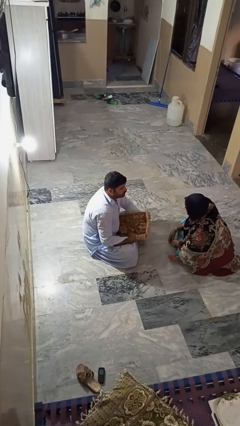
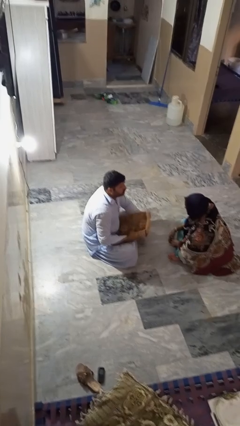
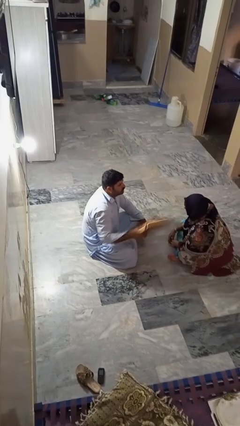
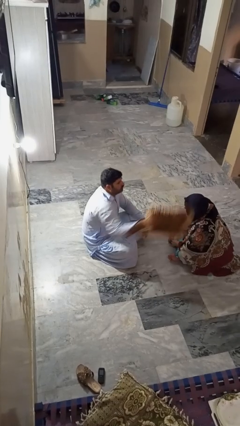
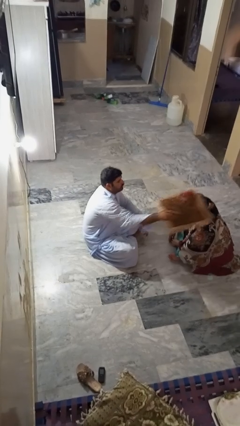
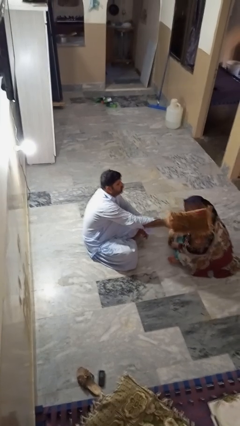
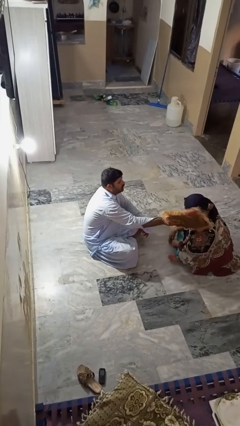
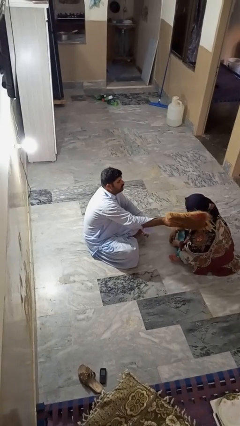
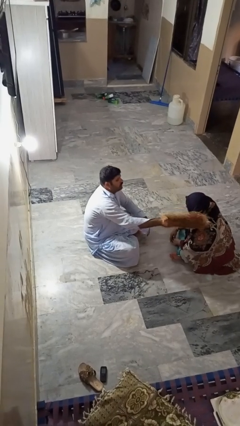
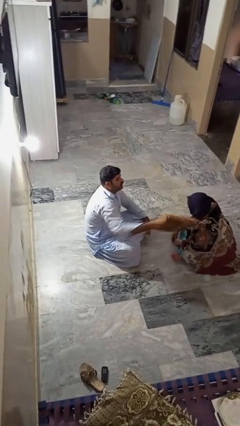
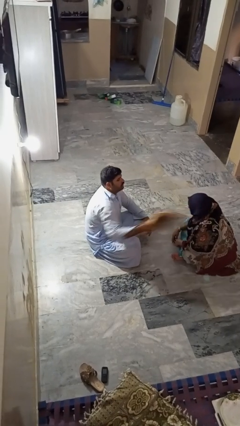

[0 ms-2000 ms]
person hits person with pillow

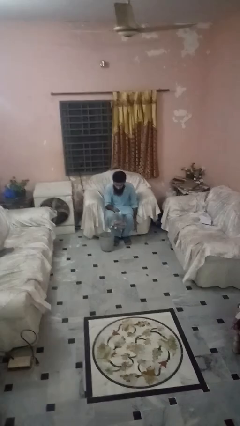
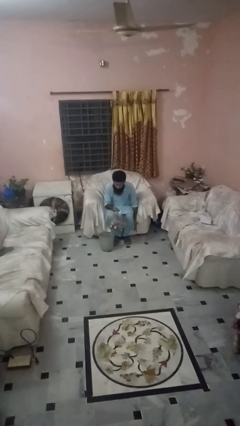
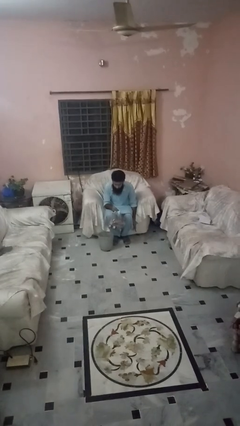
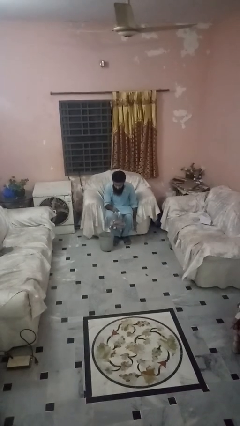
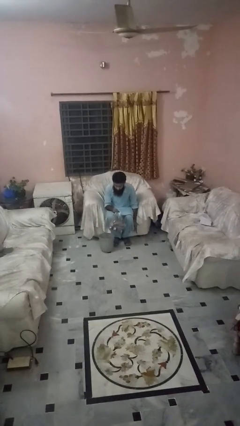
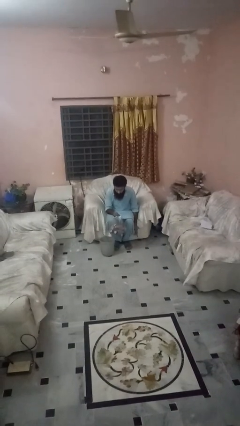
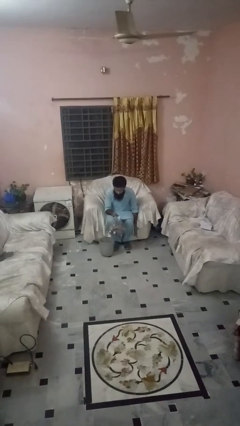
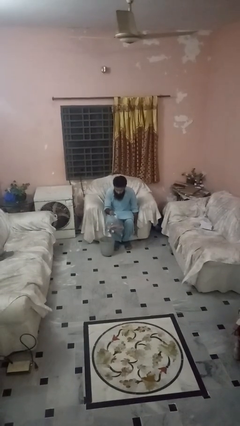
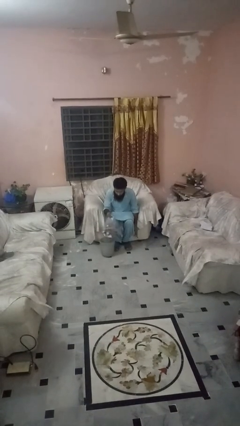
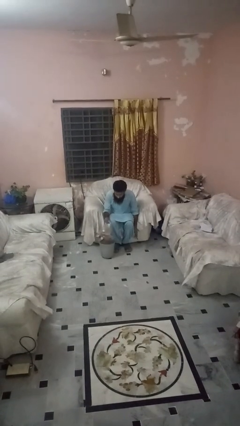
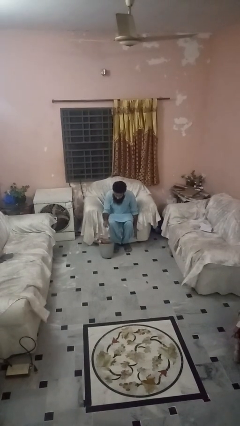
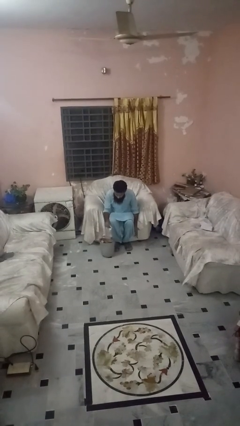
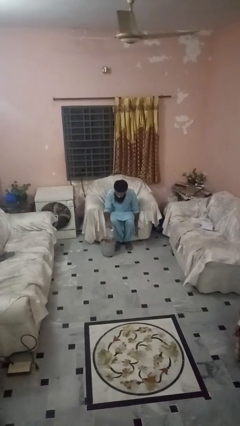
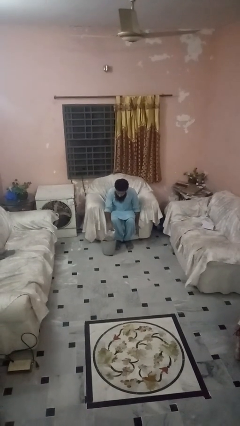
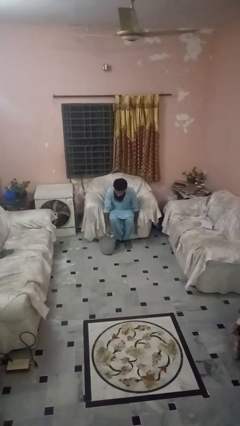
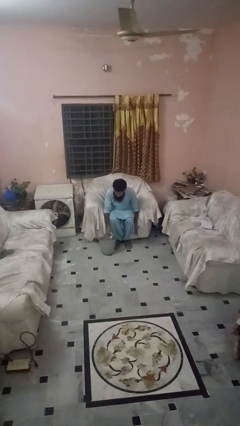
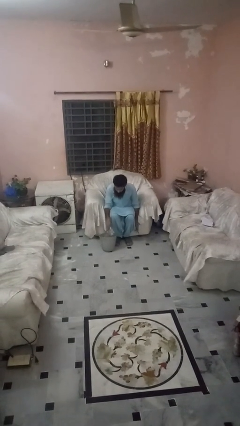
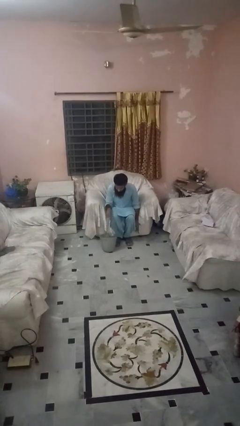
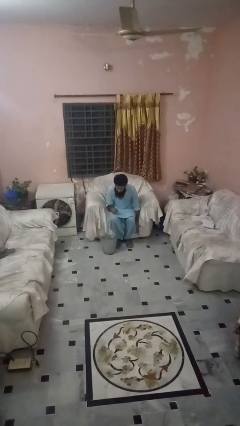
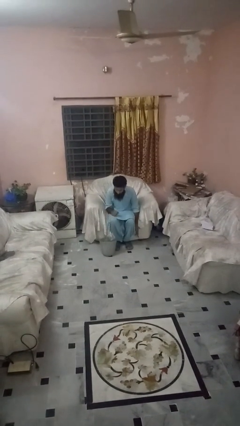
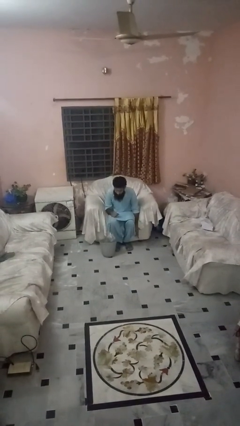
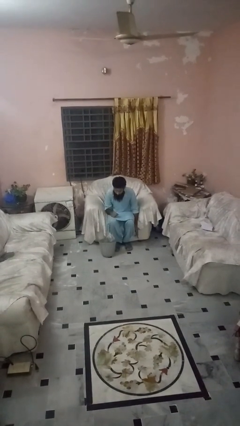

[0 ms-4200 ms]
person inserts trashbag into trashcan

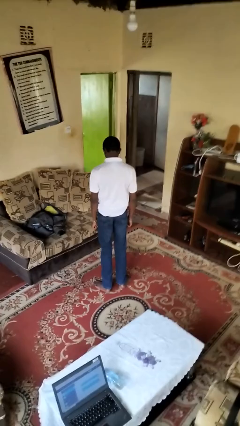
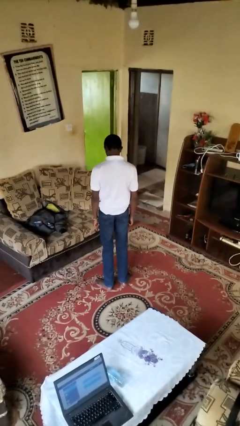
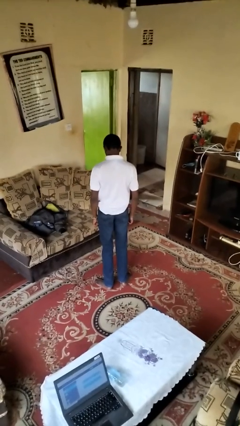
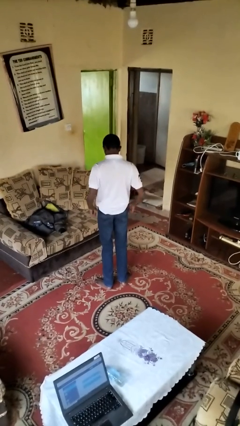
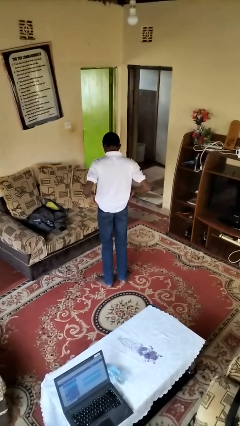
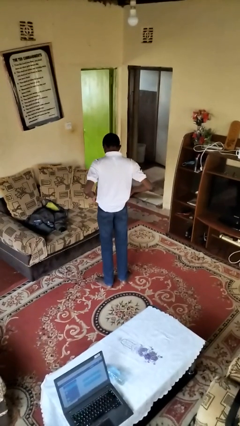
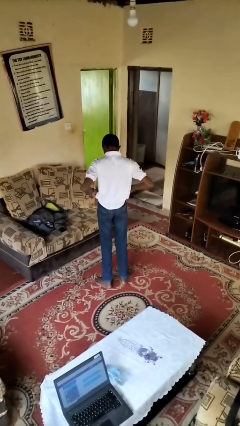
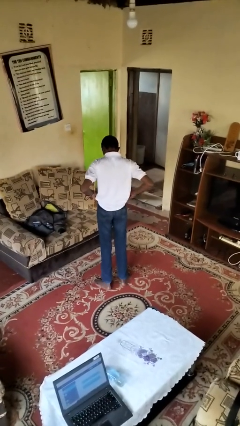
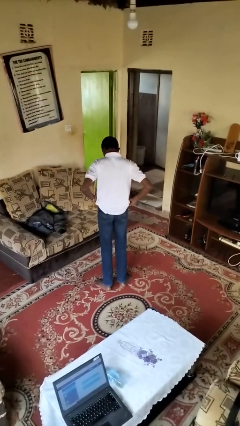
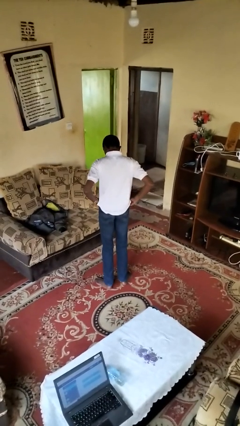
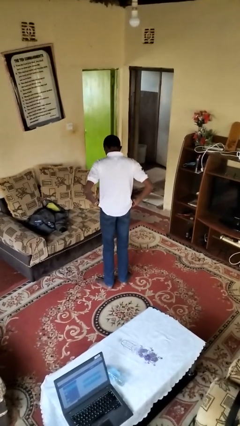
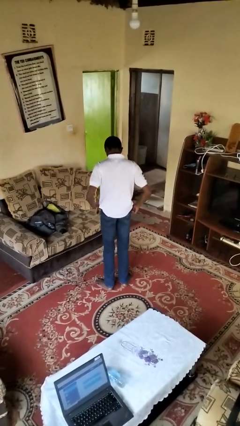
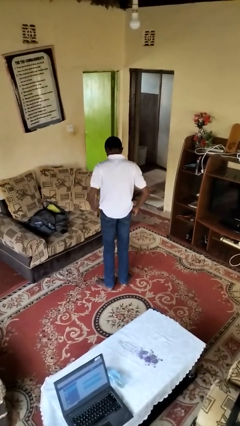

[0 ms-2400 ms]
person hikes up pants

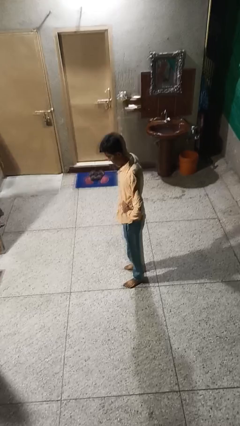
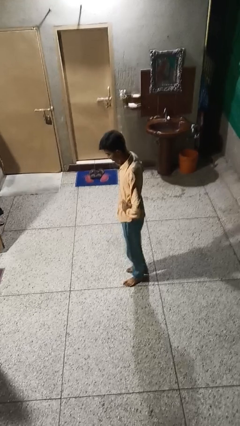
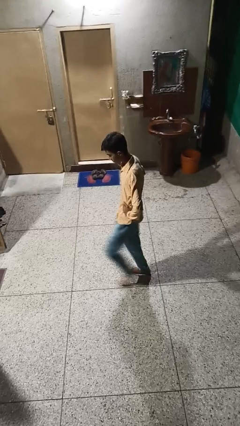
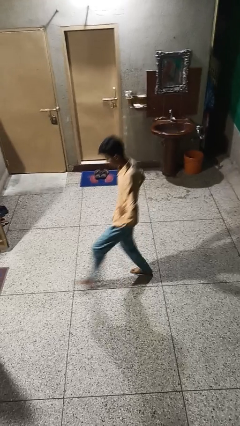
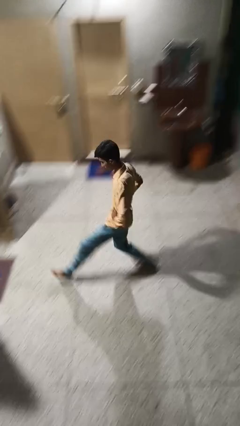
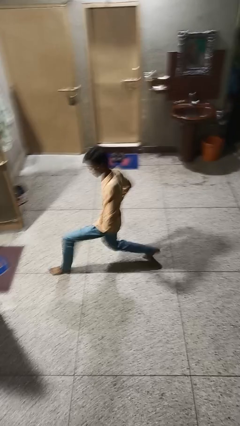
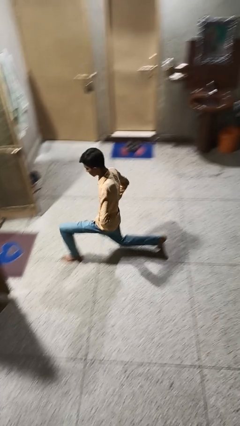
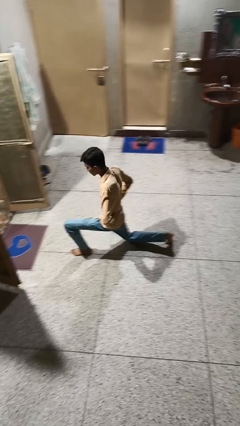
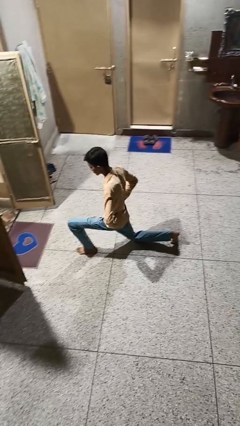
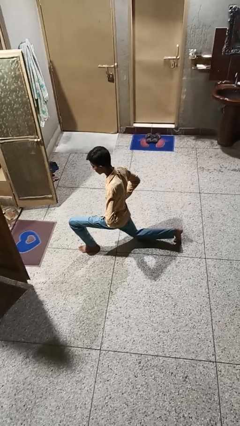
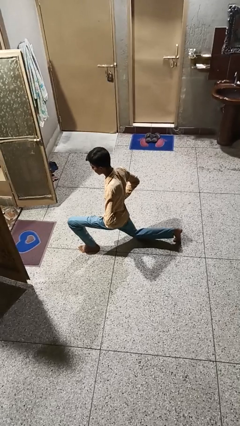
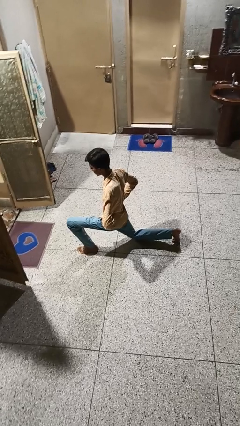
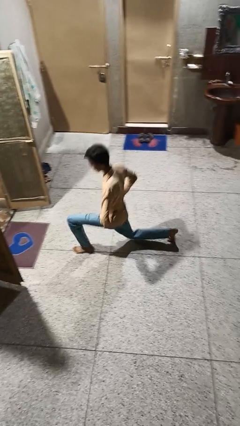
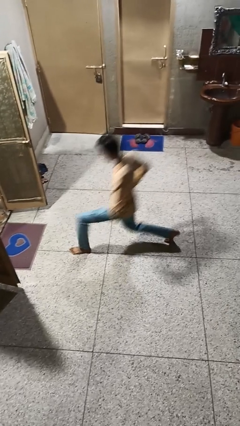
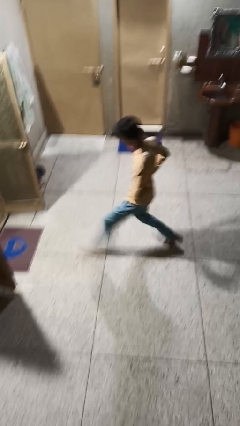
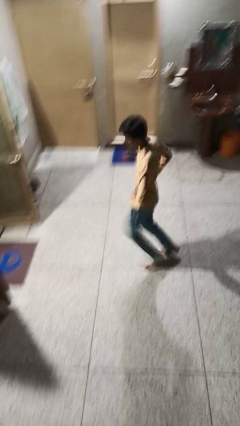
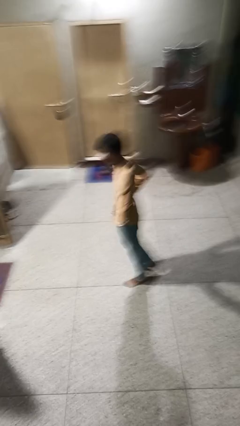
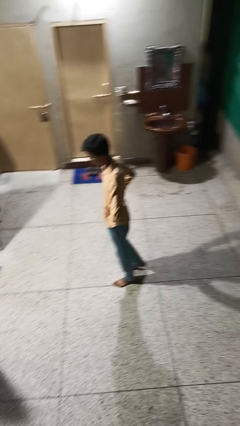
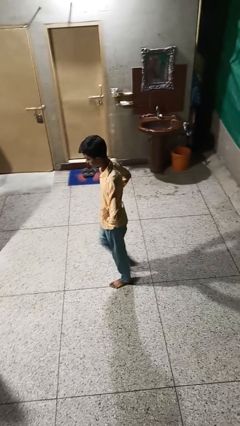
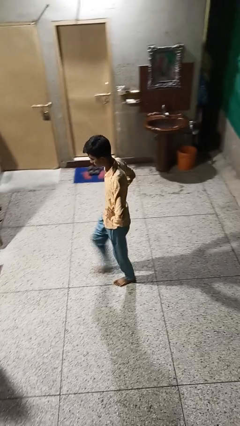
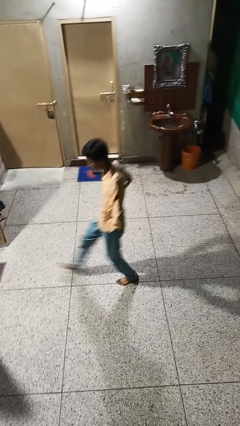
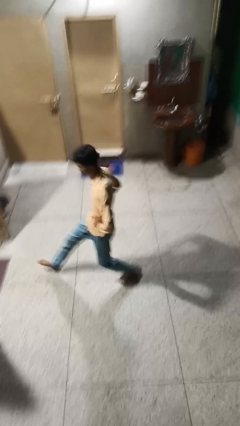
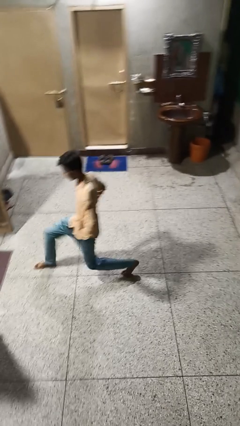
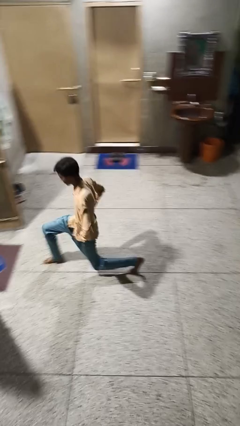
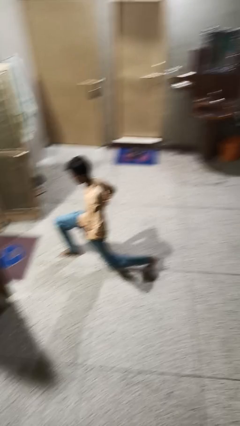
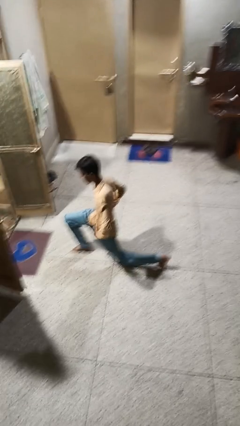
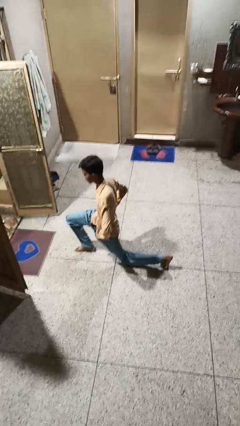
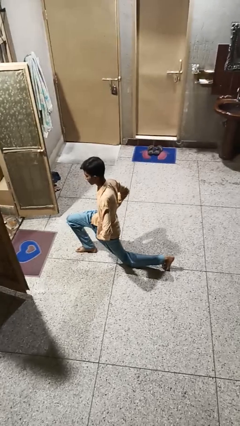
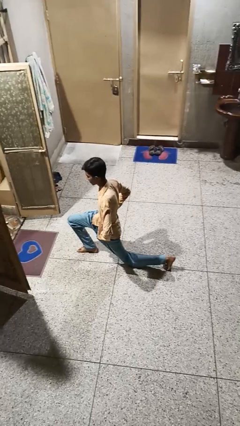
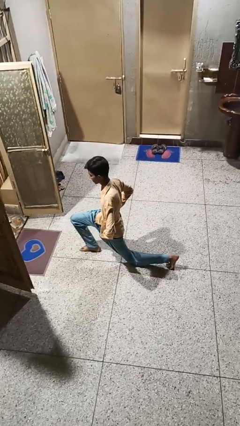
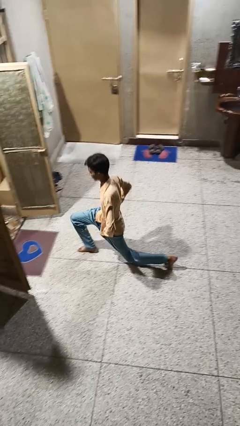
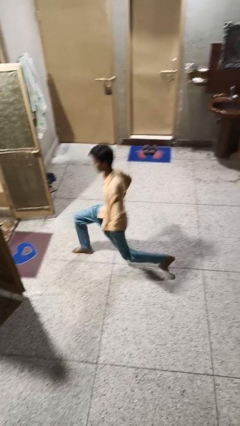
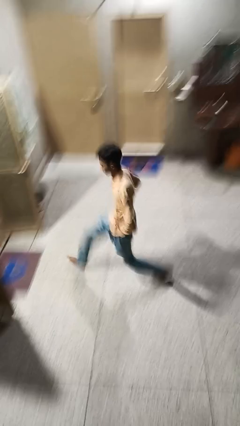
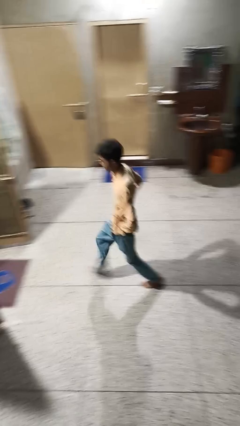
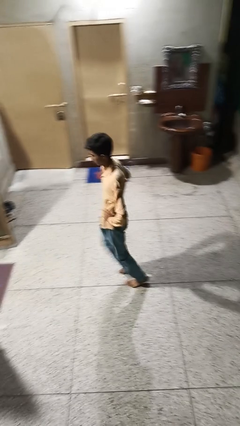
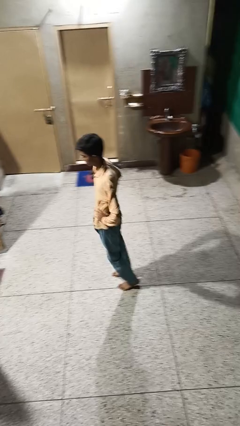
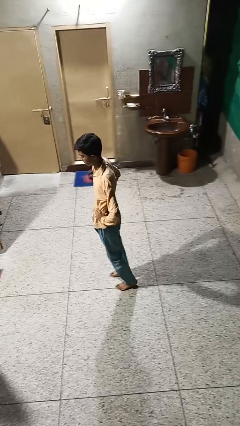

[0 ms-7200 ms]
person exercises with lunges

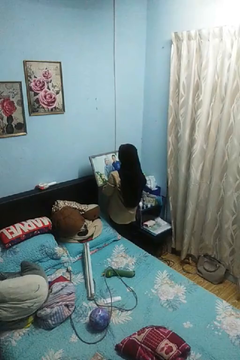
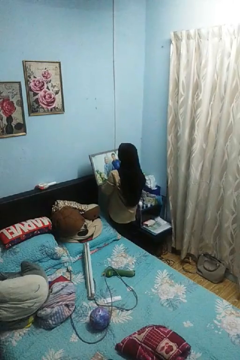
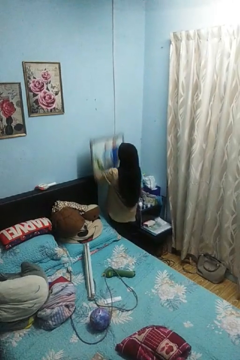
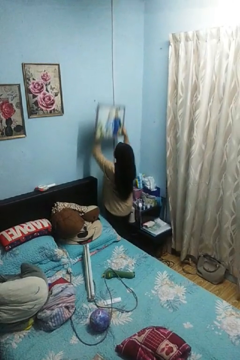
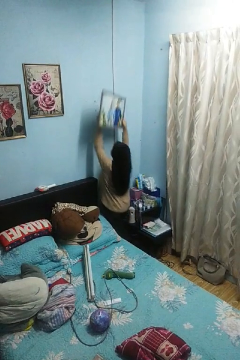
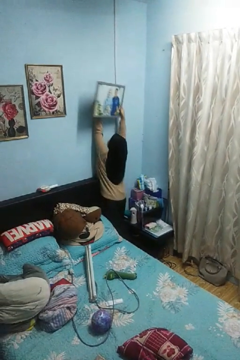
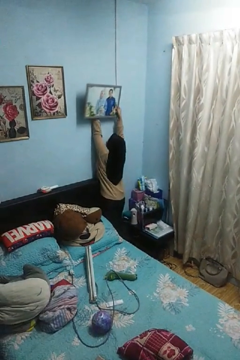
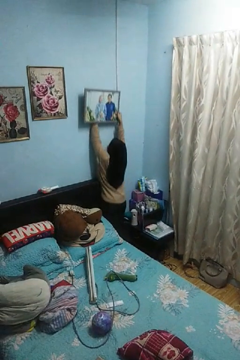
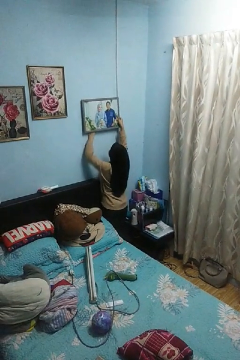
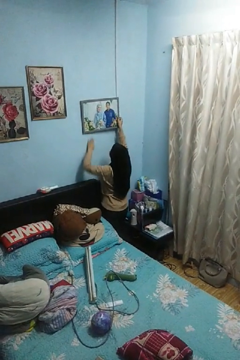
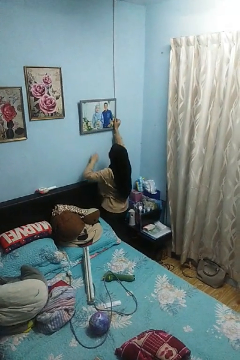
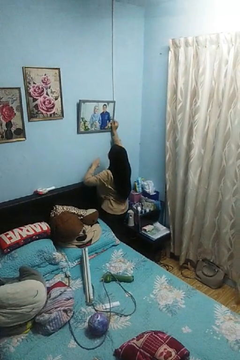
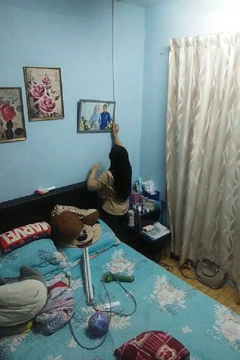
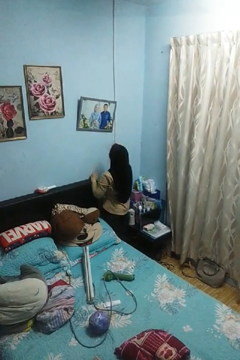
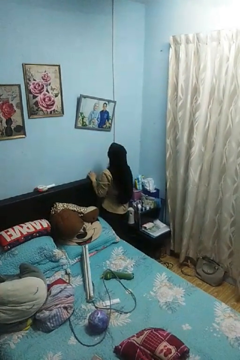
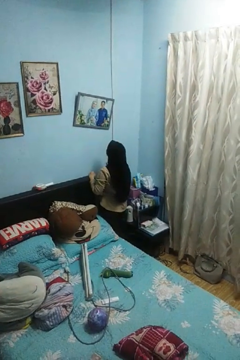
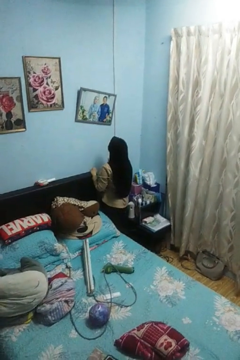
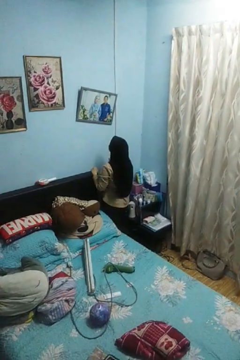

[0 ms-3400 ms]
person puts up picture frame
